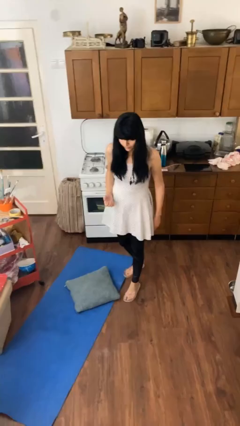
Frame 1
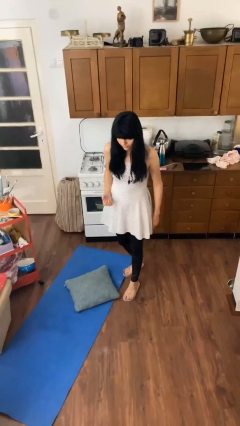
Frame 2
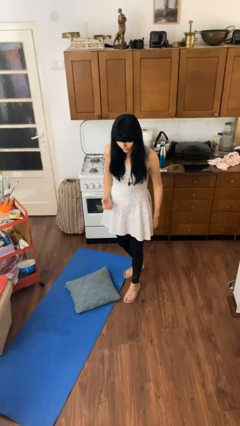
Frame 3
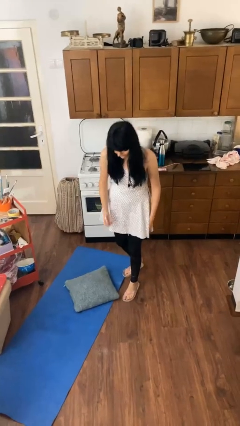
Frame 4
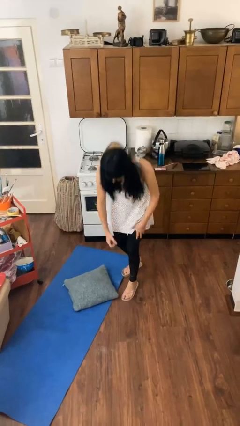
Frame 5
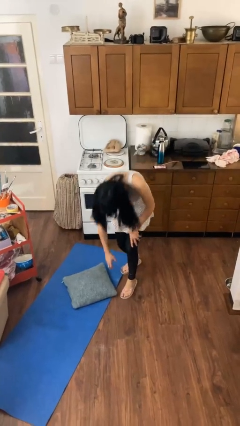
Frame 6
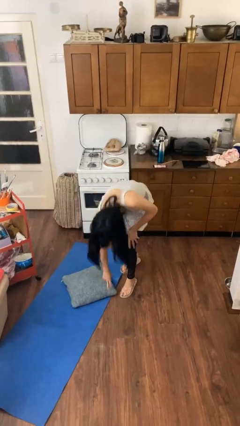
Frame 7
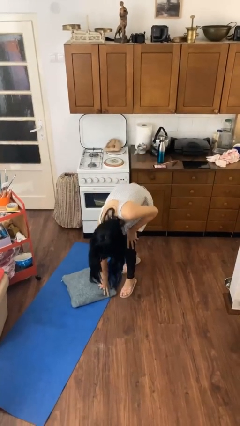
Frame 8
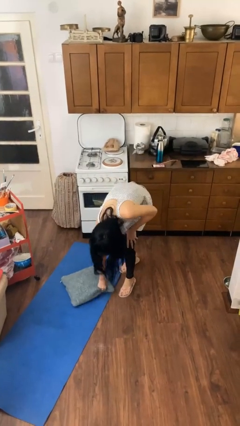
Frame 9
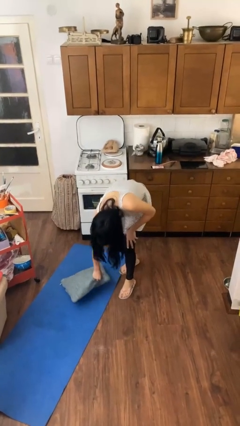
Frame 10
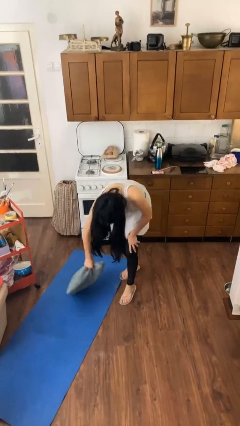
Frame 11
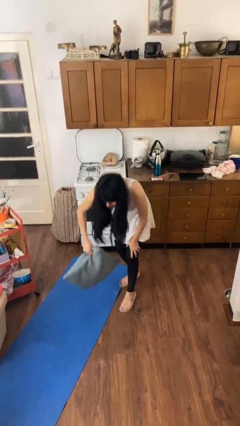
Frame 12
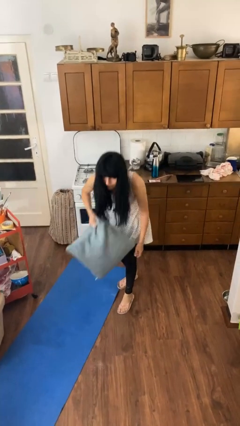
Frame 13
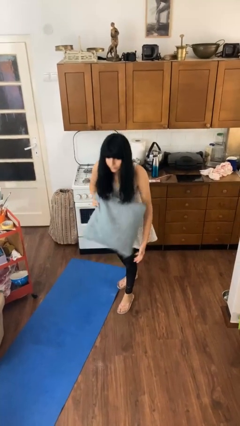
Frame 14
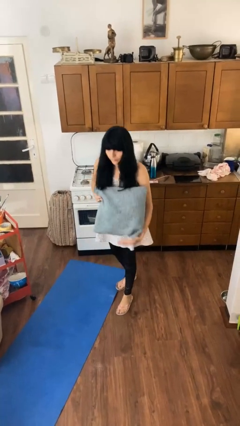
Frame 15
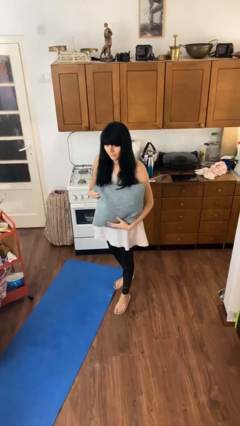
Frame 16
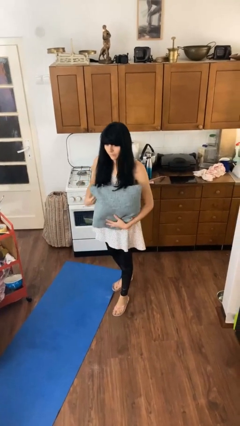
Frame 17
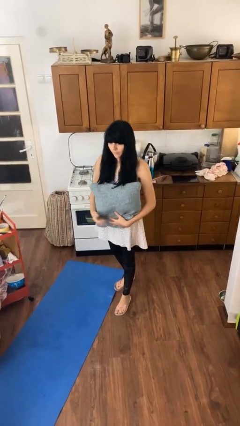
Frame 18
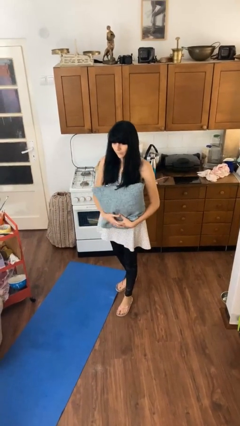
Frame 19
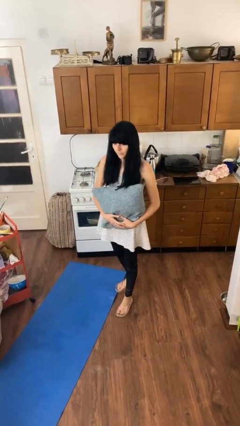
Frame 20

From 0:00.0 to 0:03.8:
person picks up object from floor

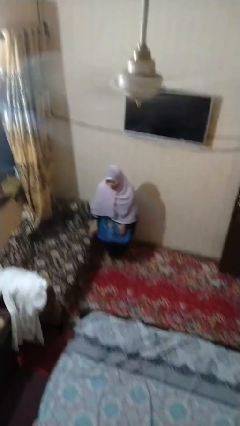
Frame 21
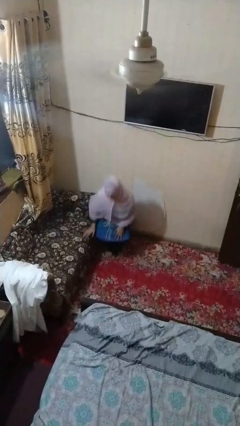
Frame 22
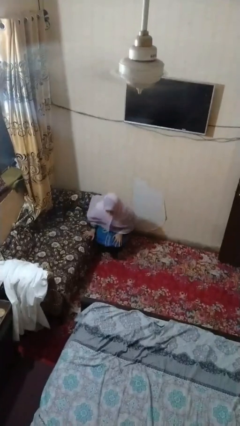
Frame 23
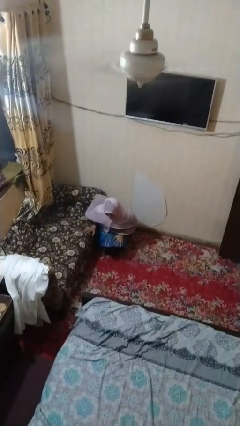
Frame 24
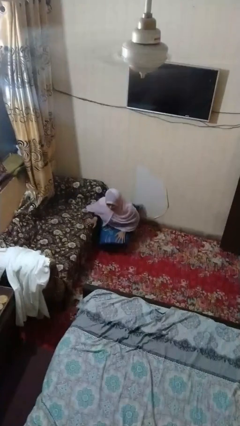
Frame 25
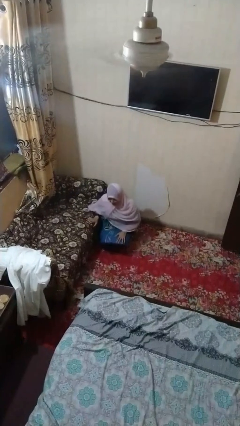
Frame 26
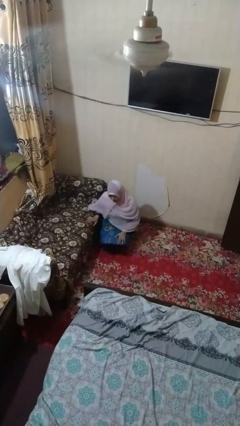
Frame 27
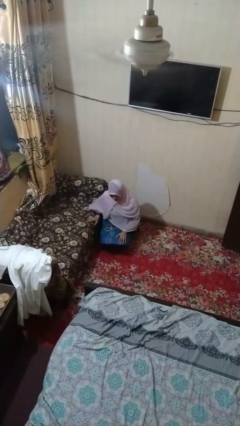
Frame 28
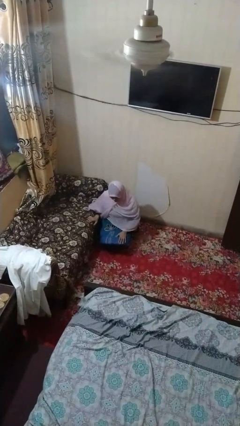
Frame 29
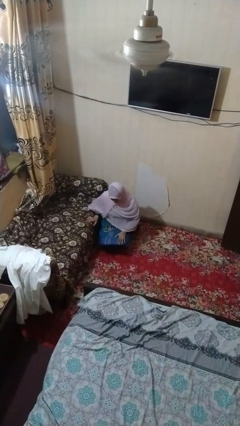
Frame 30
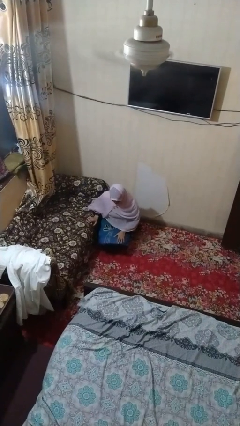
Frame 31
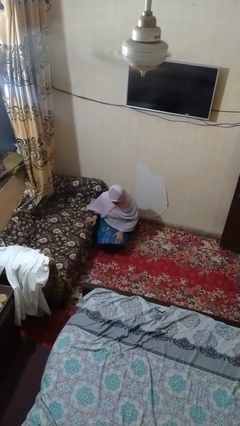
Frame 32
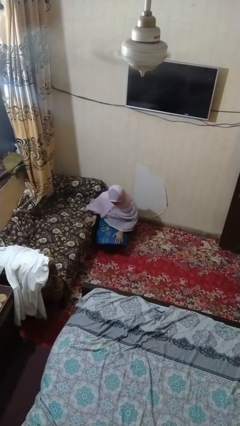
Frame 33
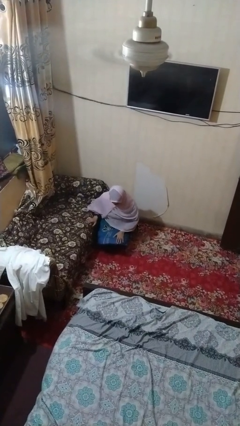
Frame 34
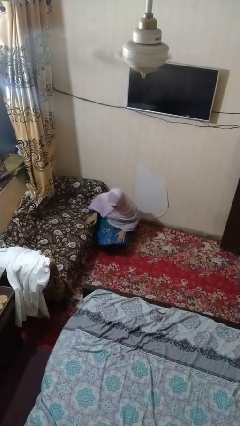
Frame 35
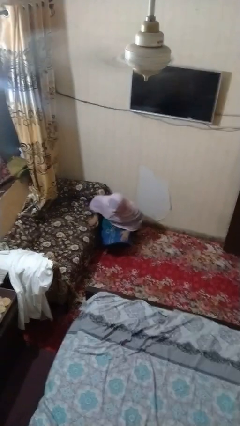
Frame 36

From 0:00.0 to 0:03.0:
person squats

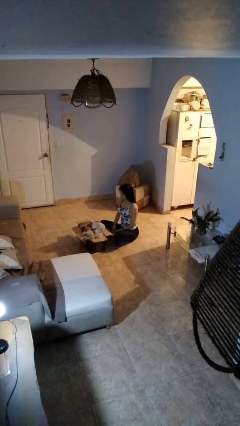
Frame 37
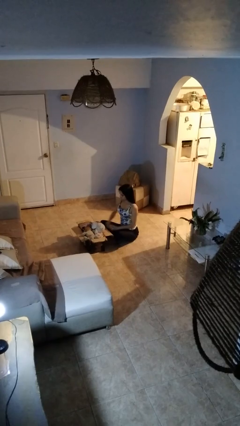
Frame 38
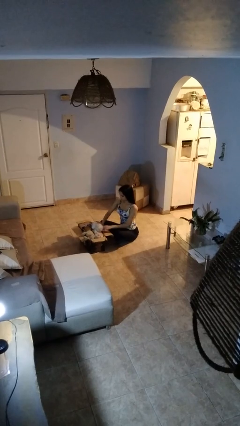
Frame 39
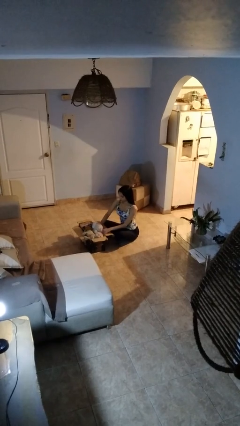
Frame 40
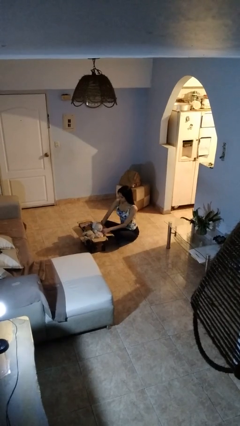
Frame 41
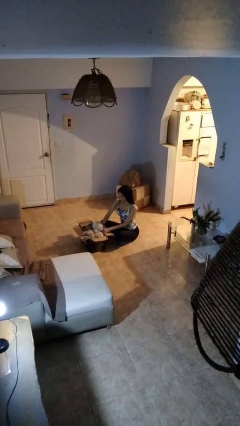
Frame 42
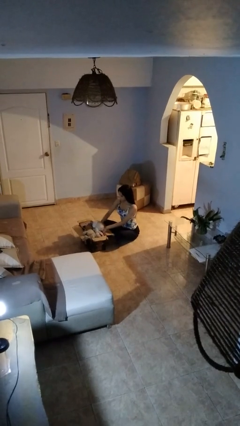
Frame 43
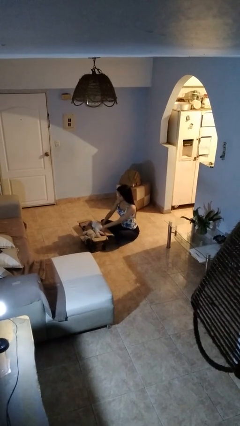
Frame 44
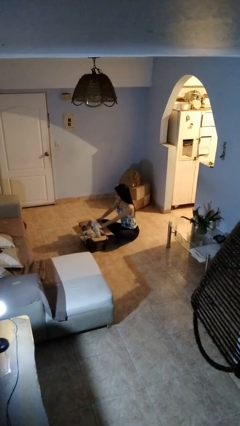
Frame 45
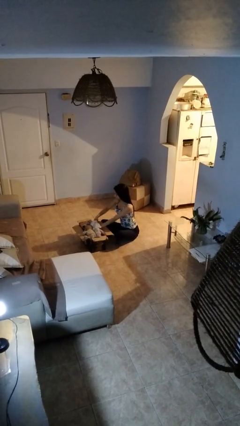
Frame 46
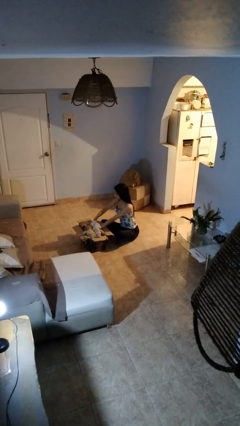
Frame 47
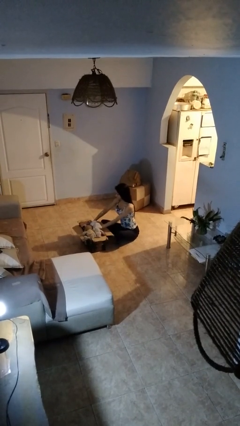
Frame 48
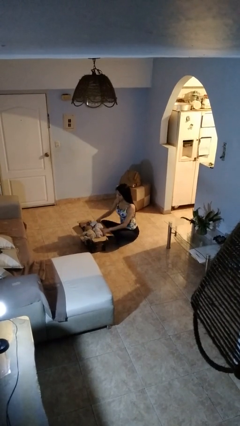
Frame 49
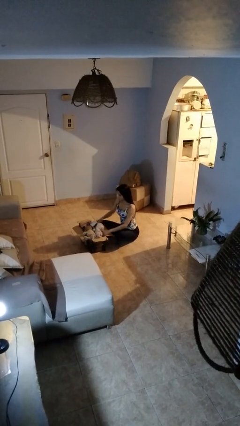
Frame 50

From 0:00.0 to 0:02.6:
person searches in box

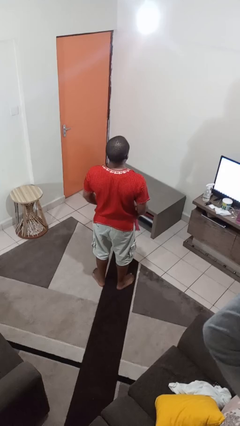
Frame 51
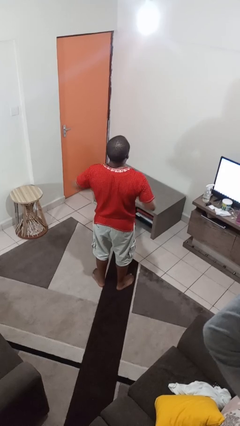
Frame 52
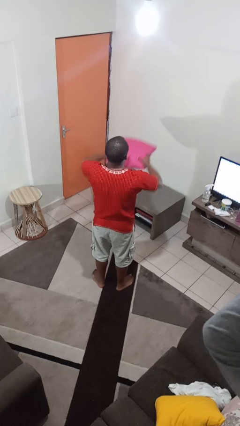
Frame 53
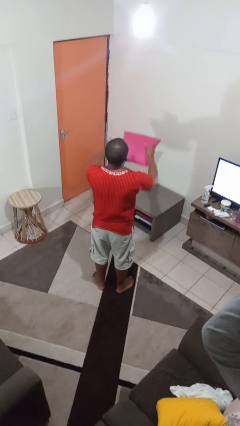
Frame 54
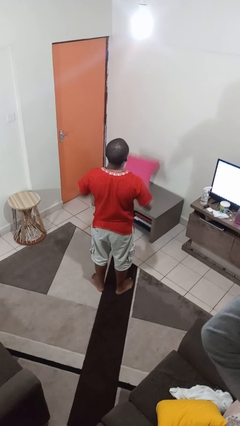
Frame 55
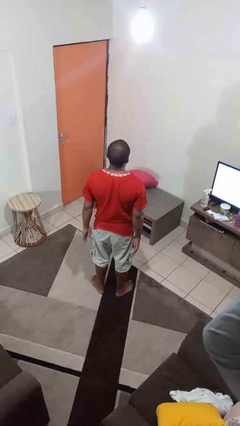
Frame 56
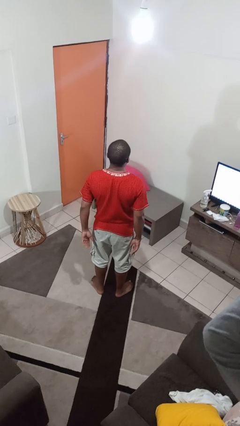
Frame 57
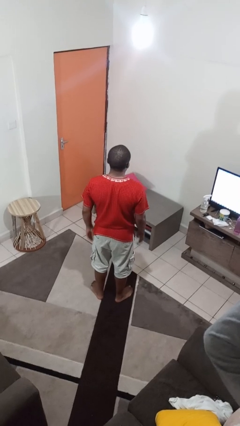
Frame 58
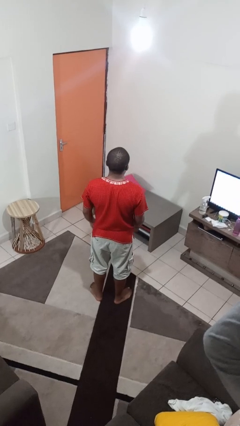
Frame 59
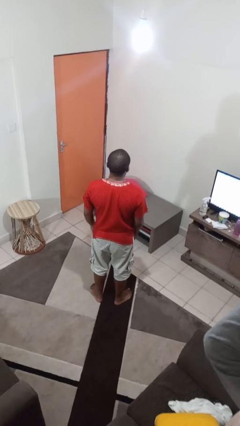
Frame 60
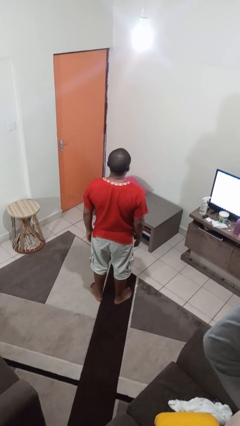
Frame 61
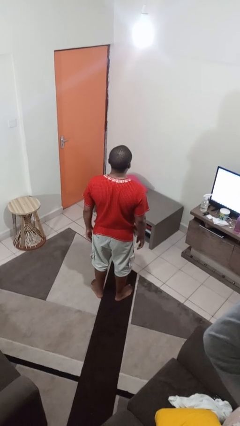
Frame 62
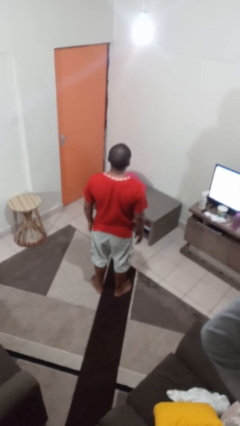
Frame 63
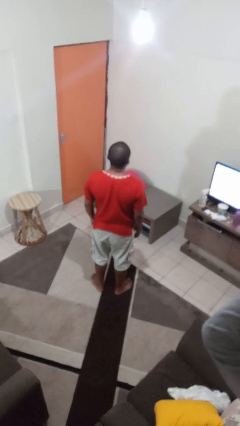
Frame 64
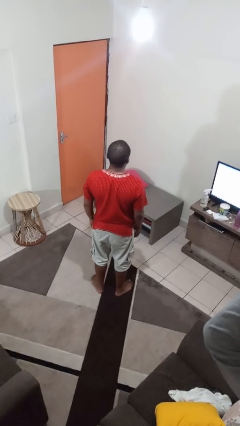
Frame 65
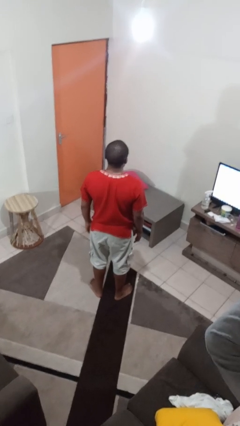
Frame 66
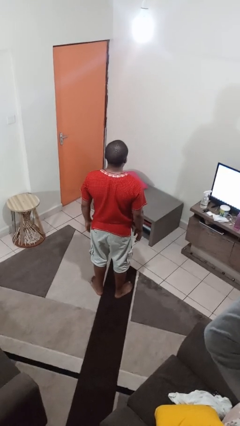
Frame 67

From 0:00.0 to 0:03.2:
person throws object on table

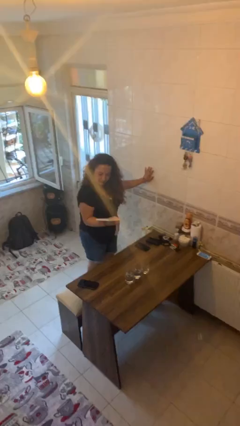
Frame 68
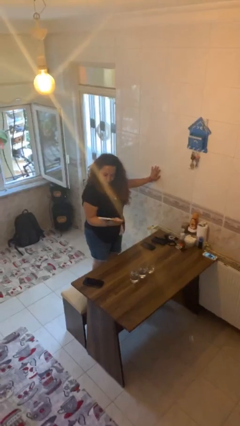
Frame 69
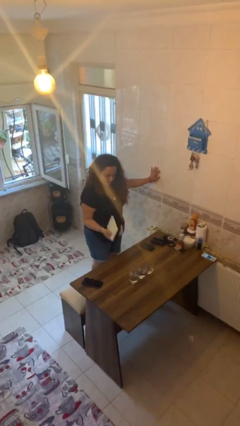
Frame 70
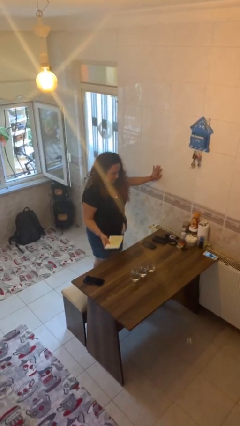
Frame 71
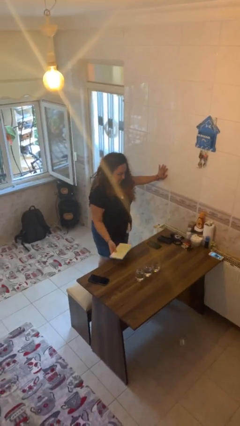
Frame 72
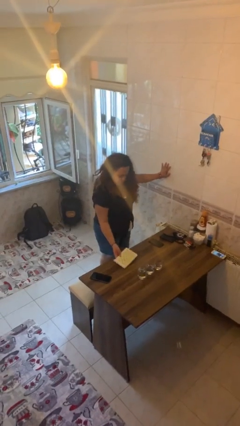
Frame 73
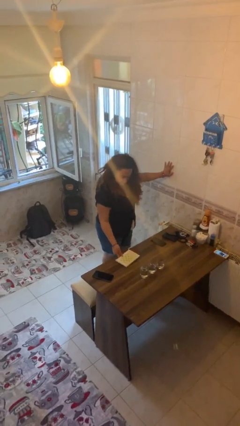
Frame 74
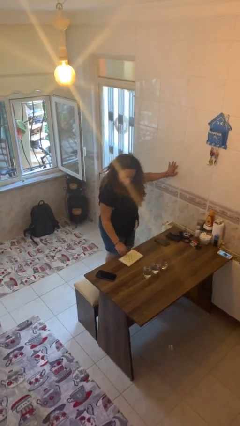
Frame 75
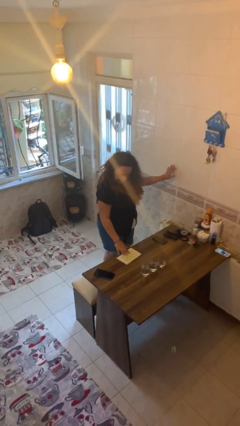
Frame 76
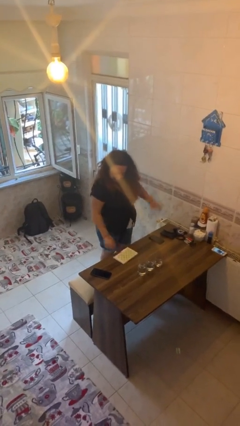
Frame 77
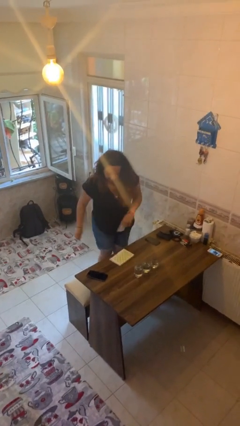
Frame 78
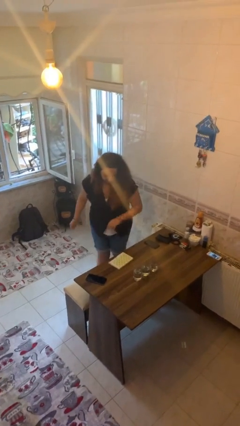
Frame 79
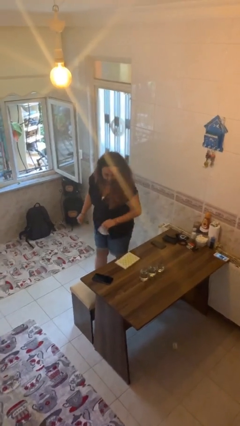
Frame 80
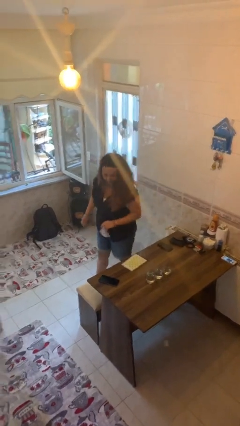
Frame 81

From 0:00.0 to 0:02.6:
person puts down object on table

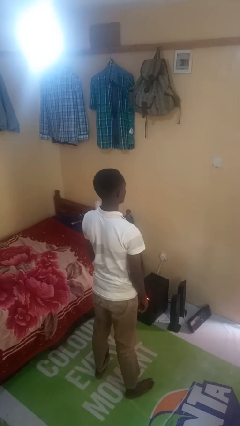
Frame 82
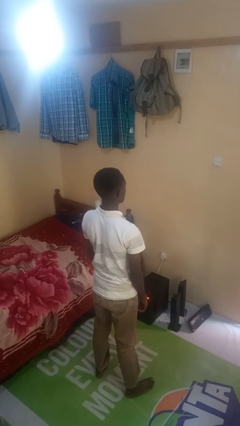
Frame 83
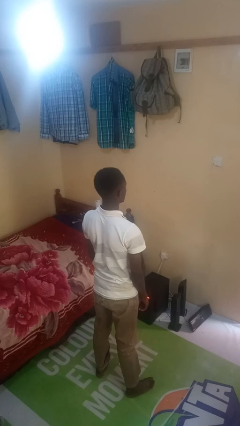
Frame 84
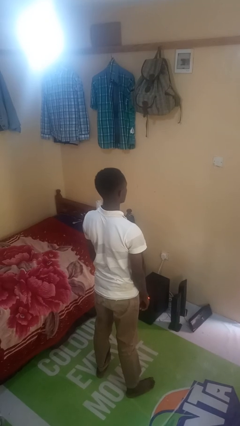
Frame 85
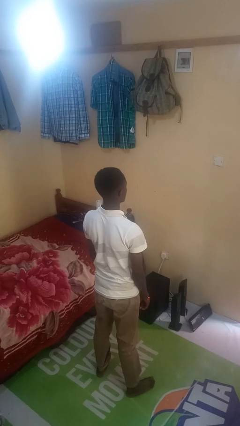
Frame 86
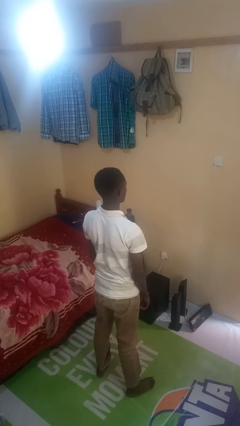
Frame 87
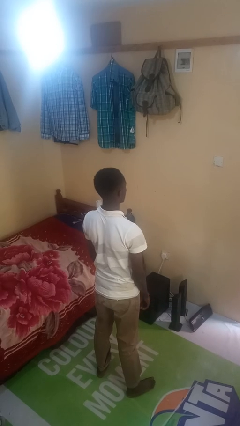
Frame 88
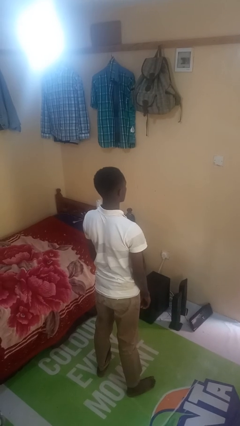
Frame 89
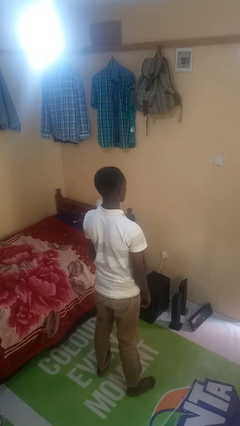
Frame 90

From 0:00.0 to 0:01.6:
person stands up

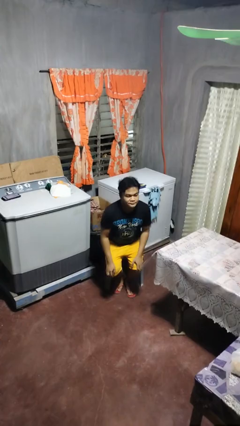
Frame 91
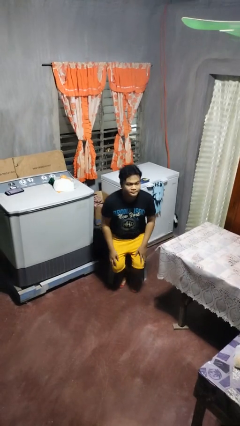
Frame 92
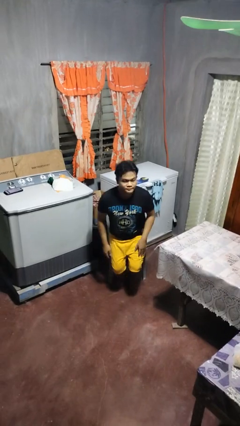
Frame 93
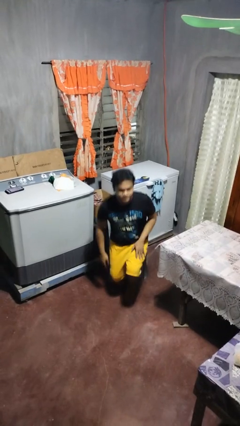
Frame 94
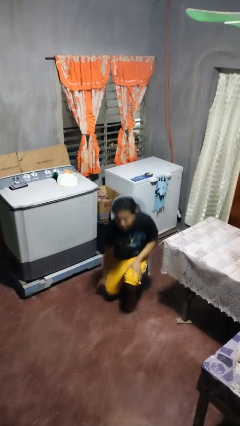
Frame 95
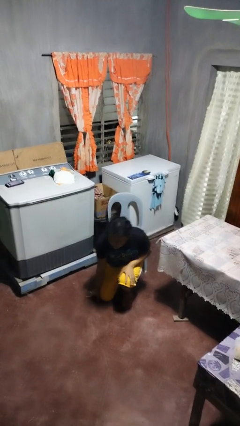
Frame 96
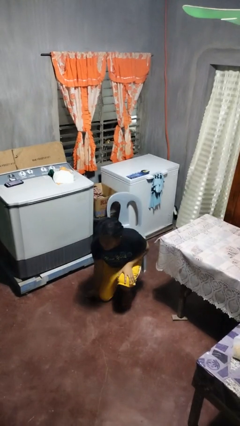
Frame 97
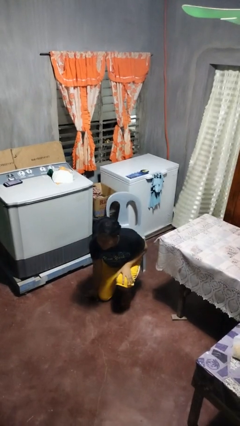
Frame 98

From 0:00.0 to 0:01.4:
person falls from chair
